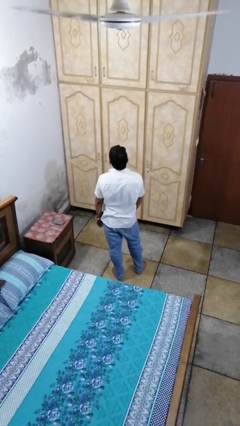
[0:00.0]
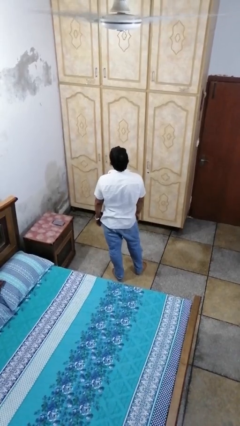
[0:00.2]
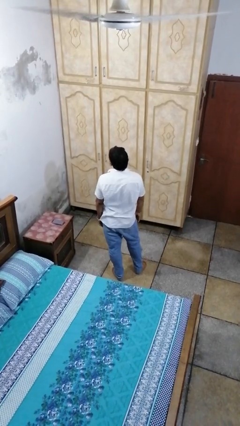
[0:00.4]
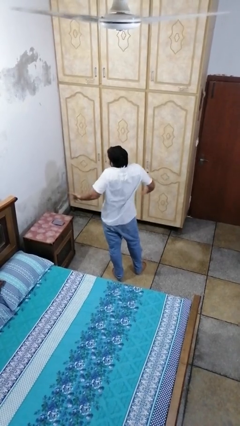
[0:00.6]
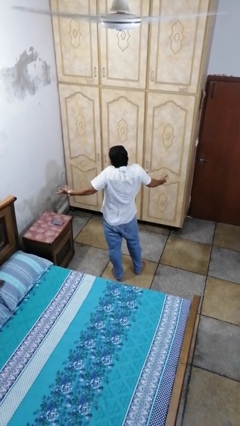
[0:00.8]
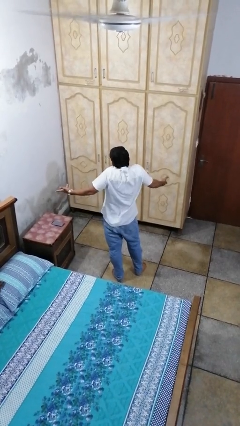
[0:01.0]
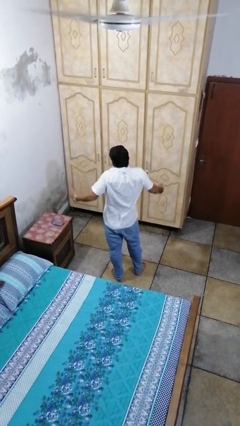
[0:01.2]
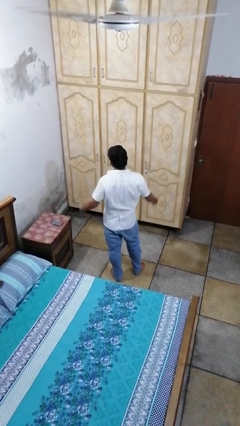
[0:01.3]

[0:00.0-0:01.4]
person shrugs

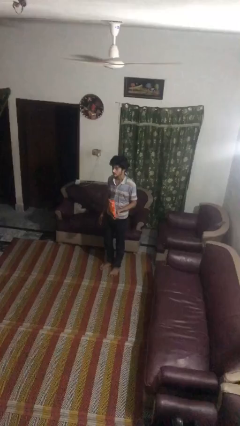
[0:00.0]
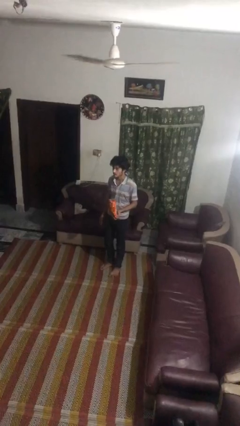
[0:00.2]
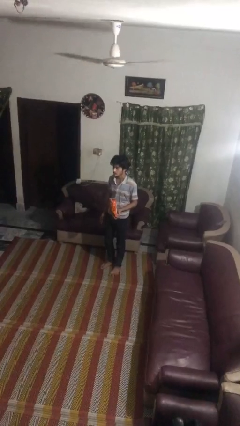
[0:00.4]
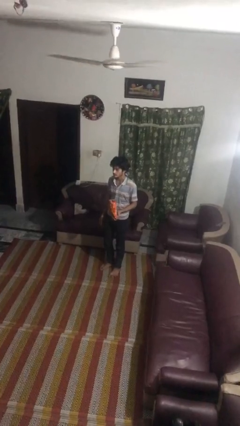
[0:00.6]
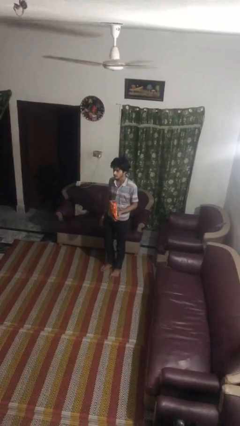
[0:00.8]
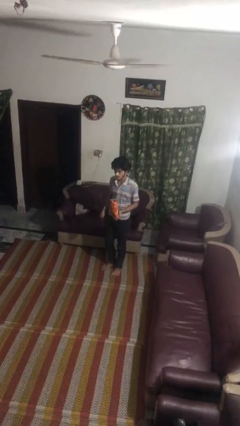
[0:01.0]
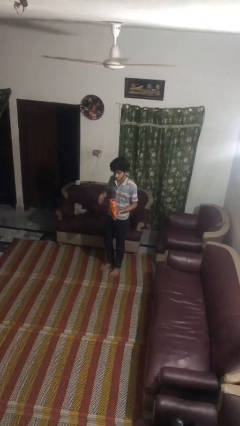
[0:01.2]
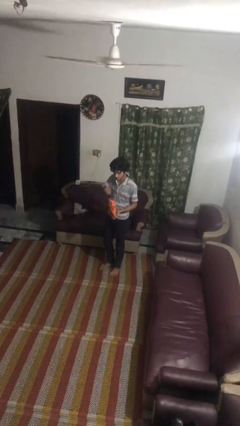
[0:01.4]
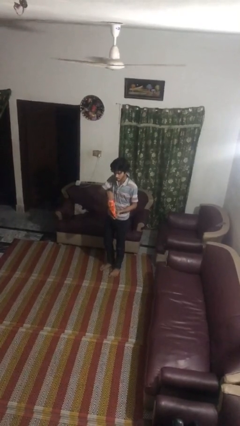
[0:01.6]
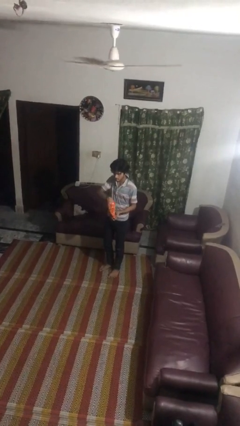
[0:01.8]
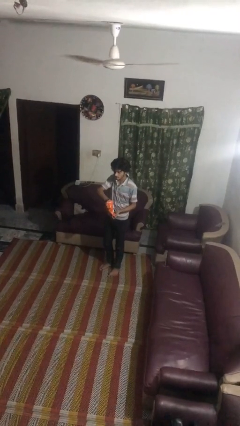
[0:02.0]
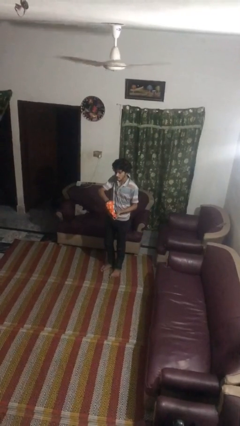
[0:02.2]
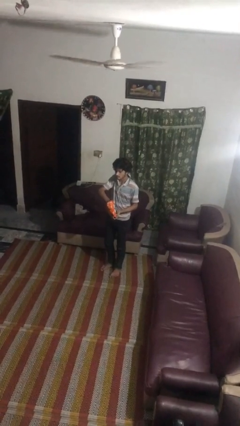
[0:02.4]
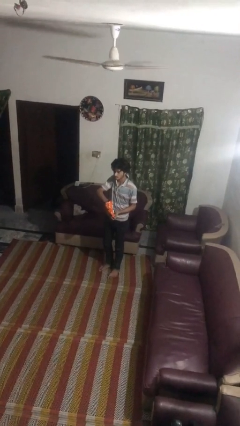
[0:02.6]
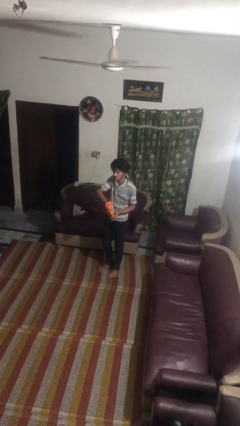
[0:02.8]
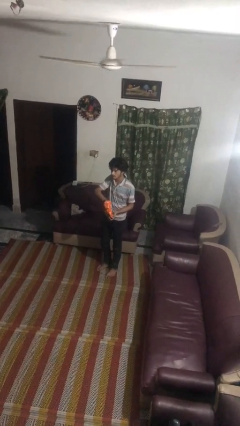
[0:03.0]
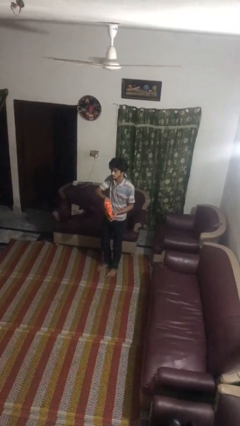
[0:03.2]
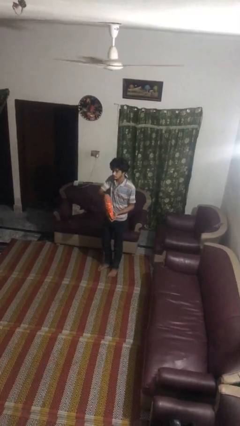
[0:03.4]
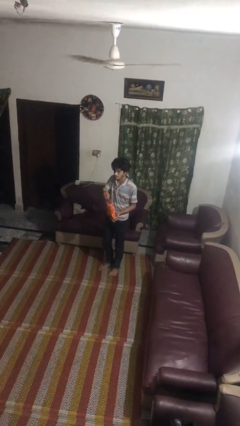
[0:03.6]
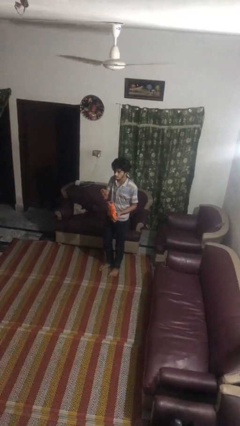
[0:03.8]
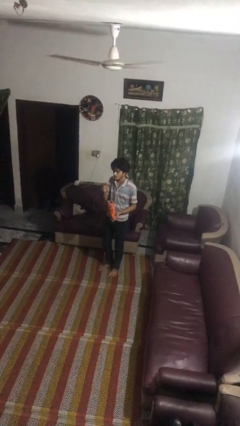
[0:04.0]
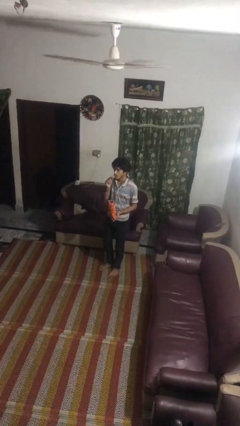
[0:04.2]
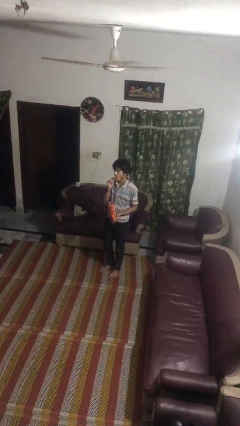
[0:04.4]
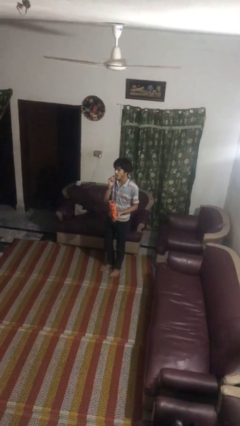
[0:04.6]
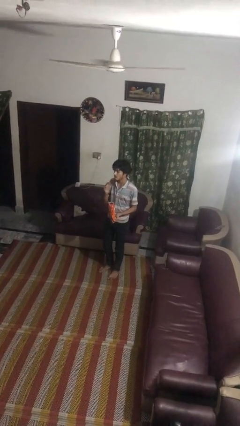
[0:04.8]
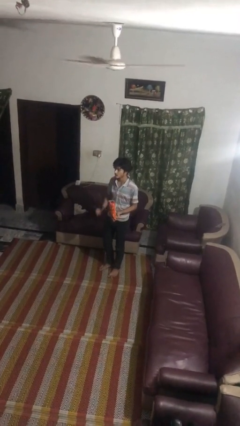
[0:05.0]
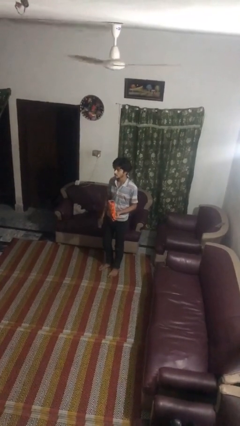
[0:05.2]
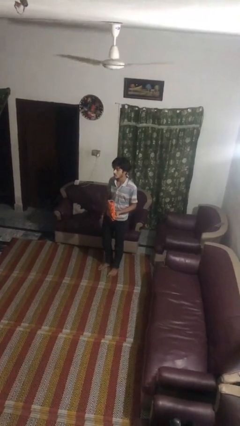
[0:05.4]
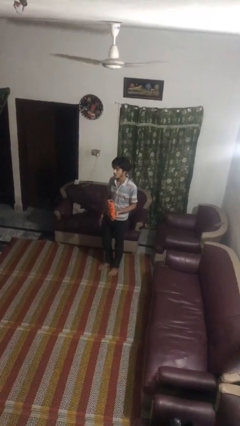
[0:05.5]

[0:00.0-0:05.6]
person eats snack from bag

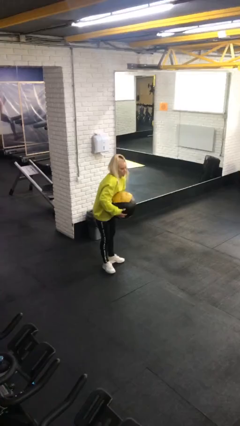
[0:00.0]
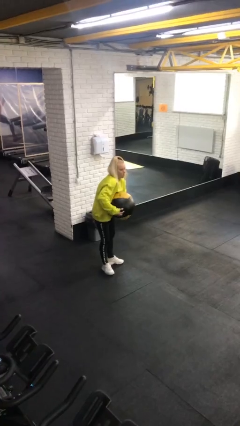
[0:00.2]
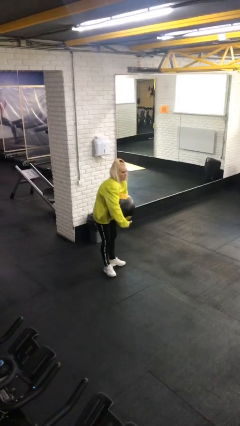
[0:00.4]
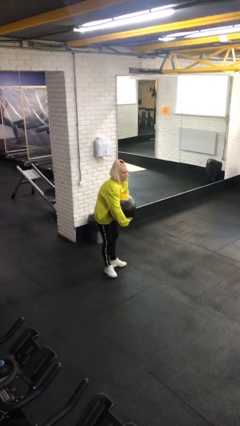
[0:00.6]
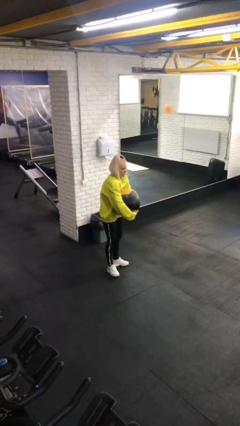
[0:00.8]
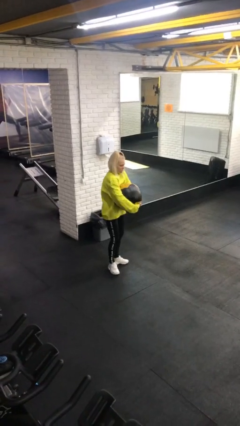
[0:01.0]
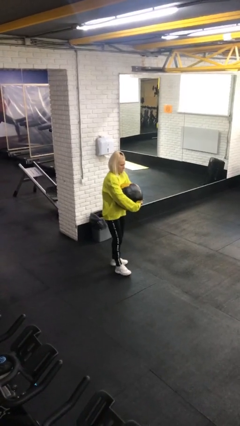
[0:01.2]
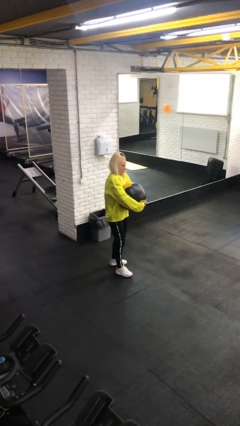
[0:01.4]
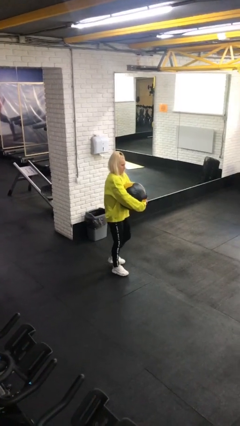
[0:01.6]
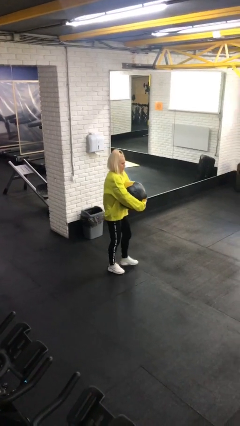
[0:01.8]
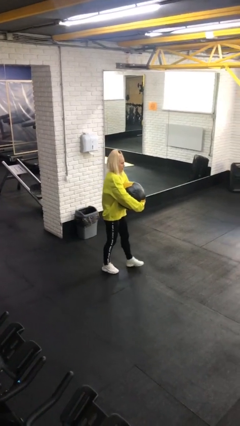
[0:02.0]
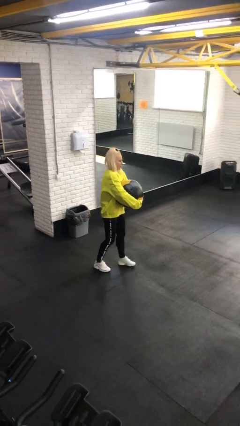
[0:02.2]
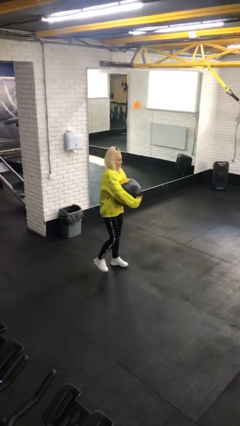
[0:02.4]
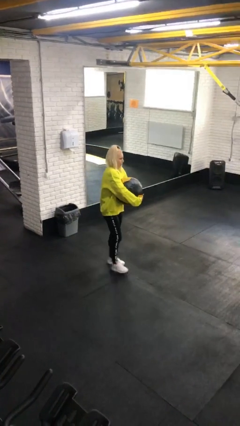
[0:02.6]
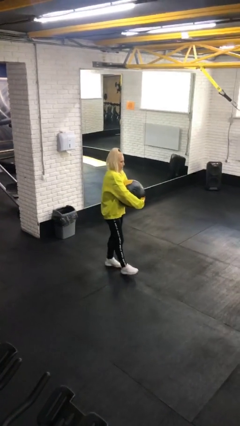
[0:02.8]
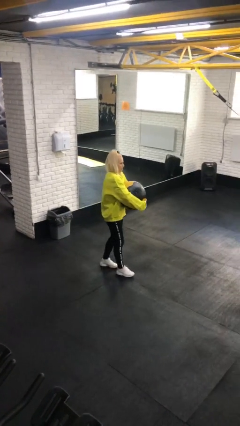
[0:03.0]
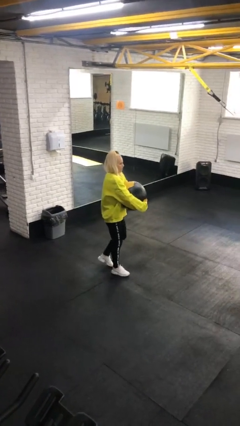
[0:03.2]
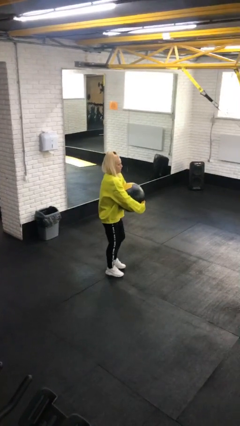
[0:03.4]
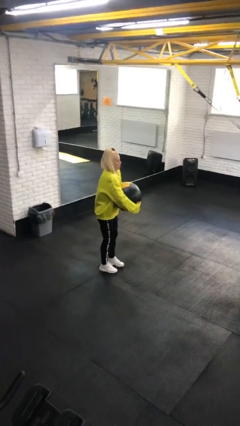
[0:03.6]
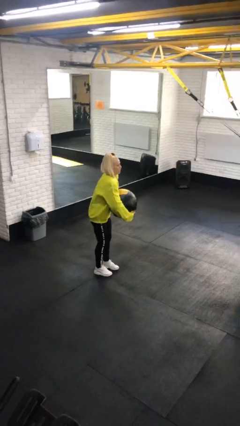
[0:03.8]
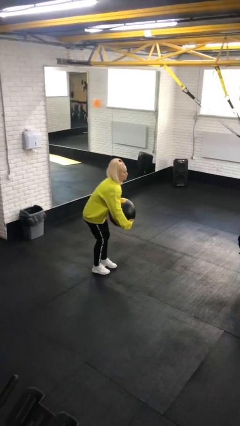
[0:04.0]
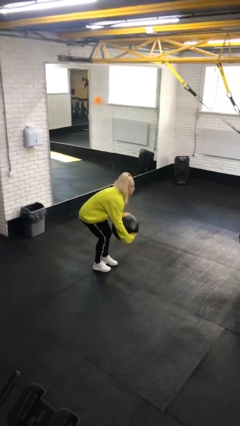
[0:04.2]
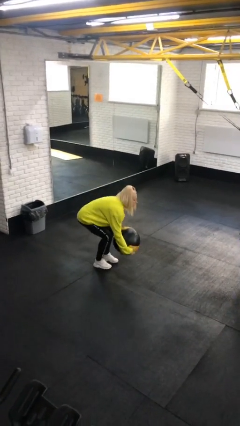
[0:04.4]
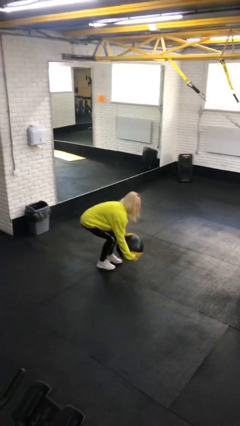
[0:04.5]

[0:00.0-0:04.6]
person carries heavy object

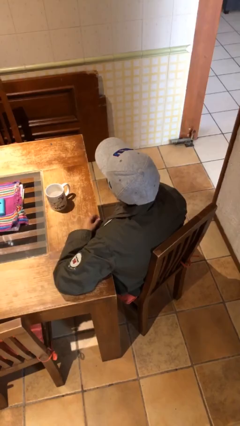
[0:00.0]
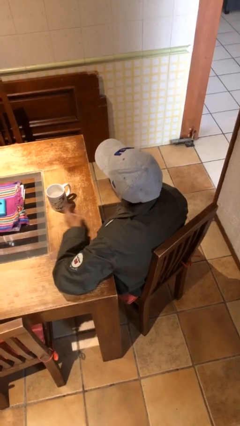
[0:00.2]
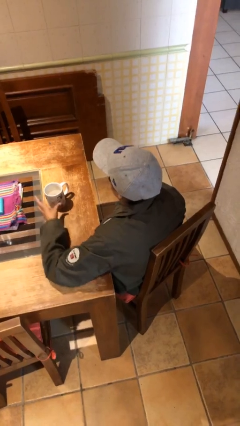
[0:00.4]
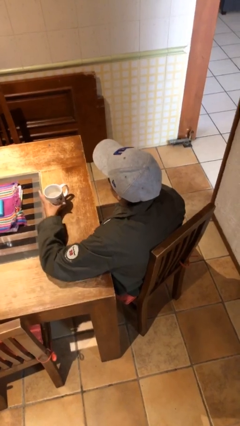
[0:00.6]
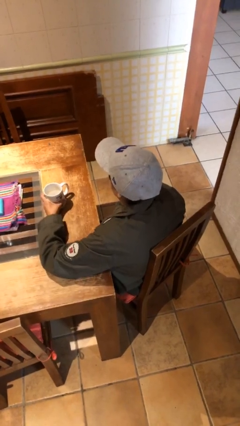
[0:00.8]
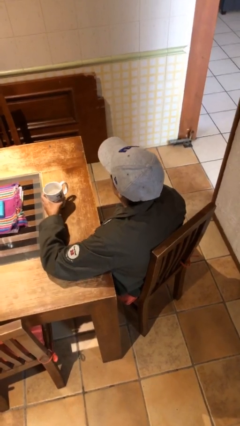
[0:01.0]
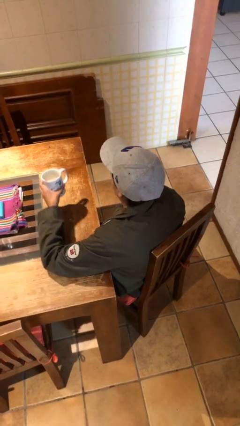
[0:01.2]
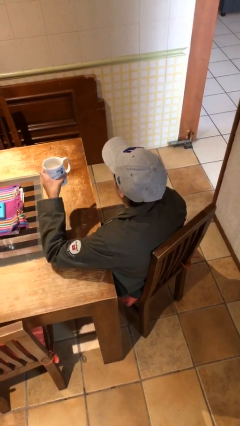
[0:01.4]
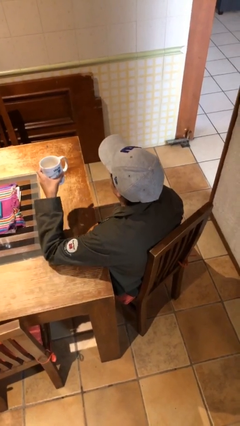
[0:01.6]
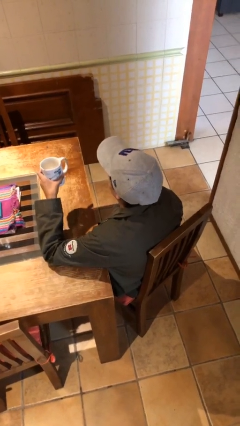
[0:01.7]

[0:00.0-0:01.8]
person picks up object from table

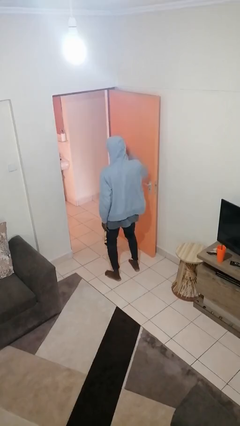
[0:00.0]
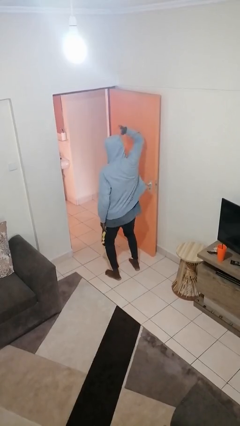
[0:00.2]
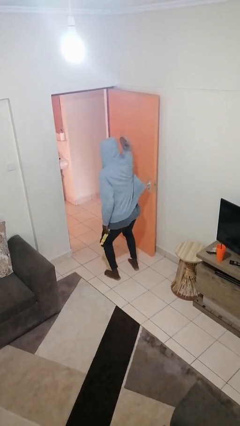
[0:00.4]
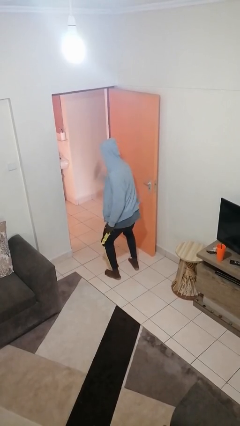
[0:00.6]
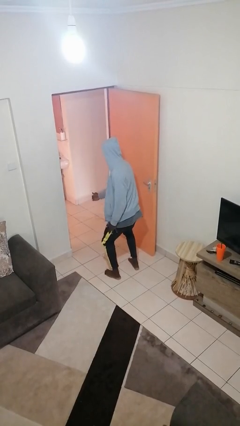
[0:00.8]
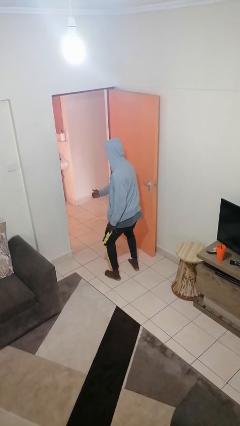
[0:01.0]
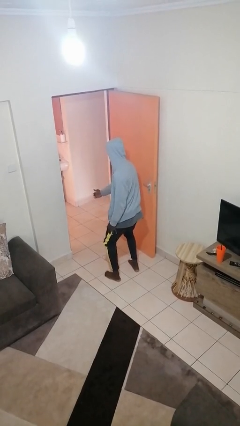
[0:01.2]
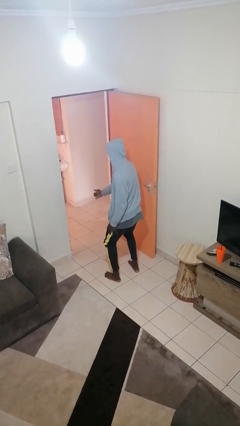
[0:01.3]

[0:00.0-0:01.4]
person karate chop

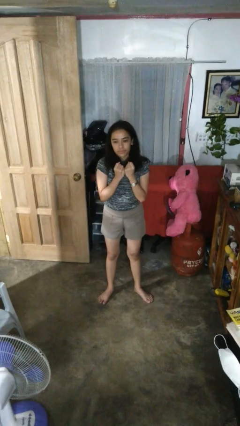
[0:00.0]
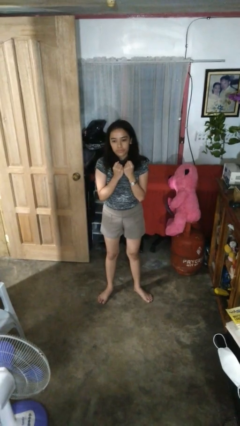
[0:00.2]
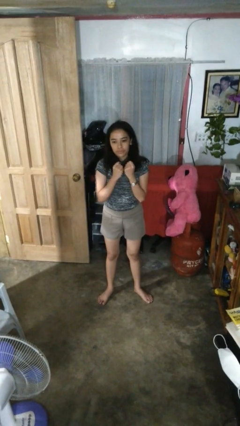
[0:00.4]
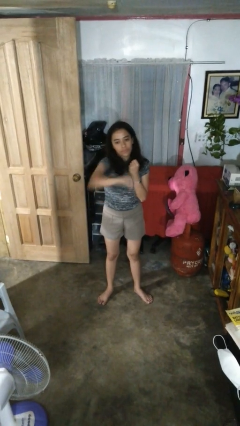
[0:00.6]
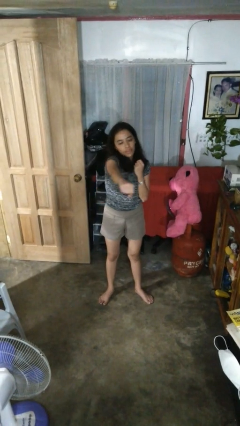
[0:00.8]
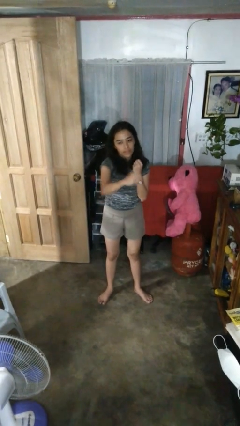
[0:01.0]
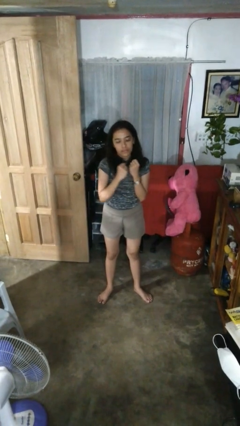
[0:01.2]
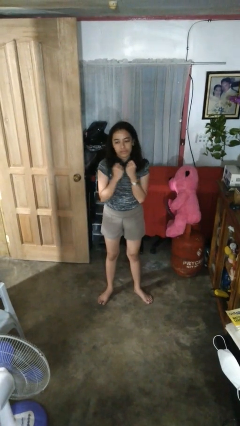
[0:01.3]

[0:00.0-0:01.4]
person punches

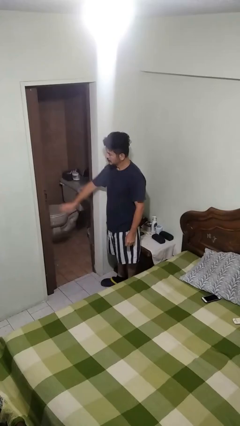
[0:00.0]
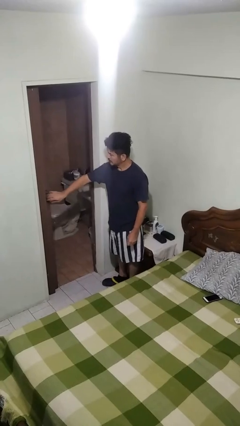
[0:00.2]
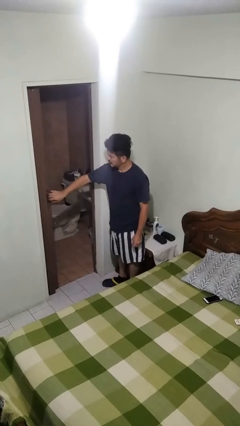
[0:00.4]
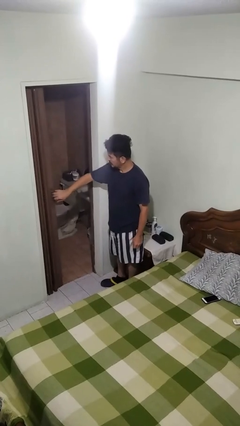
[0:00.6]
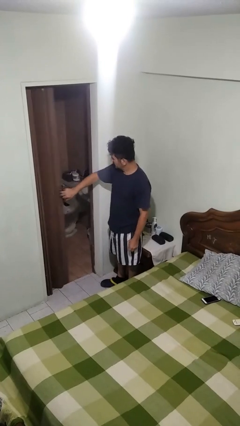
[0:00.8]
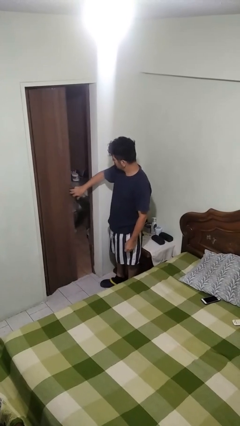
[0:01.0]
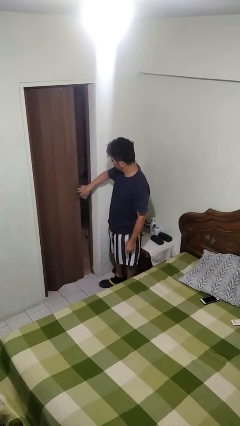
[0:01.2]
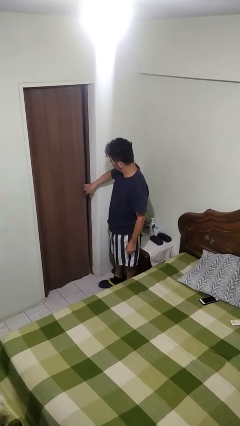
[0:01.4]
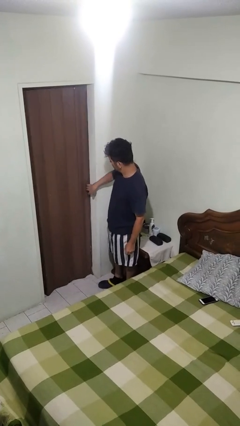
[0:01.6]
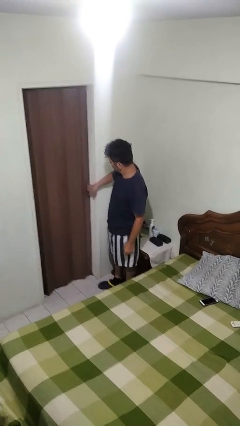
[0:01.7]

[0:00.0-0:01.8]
person closes sliding door
